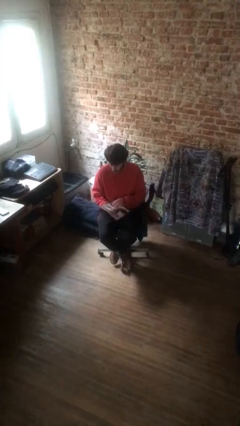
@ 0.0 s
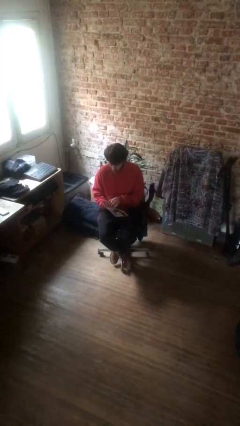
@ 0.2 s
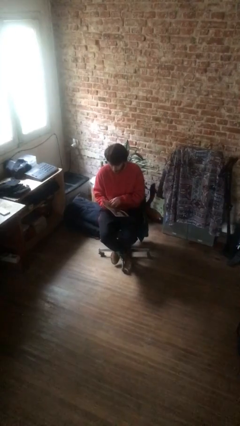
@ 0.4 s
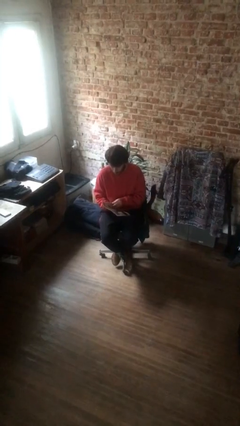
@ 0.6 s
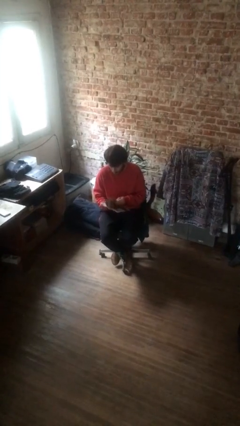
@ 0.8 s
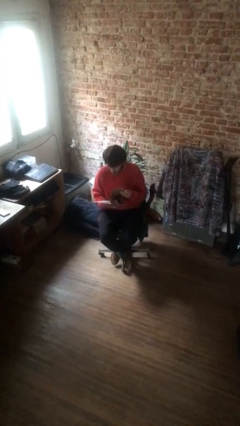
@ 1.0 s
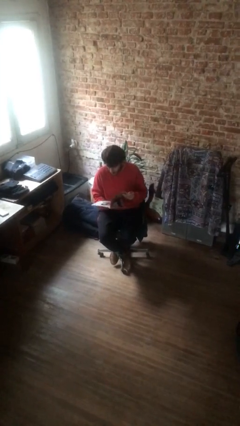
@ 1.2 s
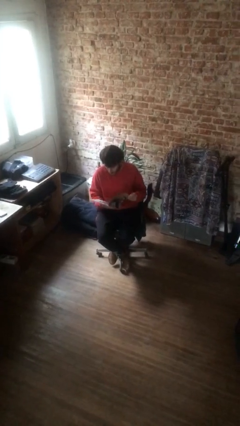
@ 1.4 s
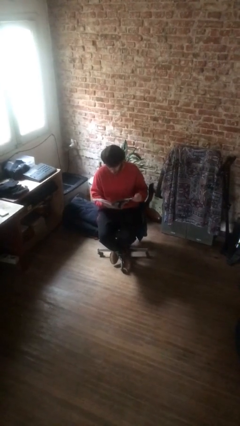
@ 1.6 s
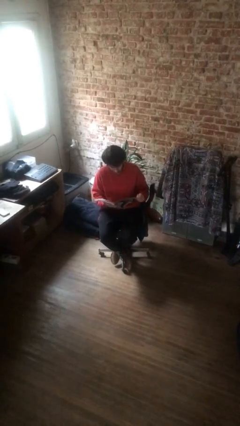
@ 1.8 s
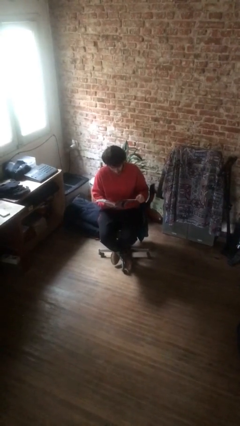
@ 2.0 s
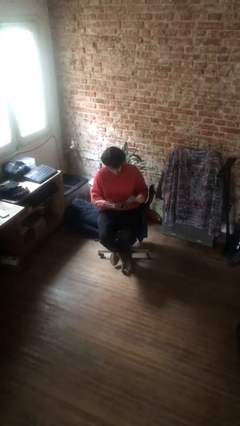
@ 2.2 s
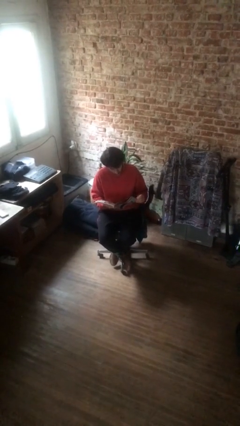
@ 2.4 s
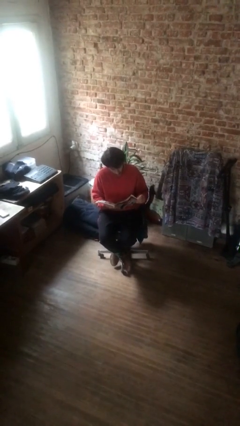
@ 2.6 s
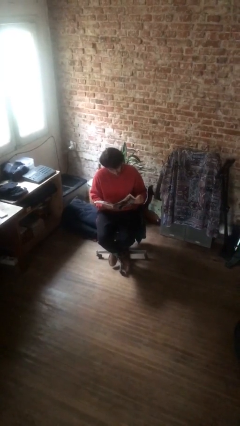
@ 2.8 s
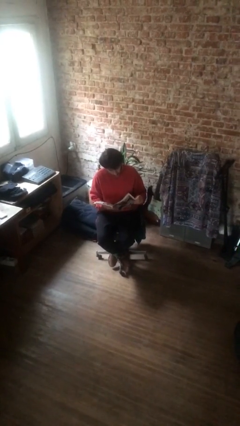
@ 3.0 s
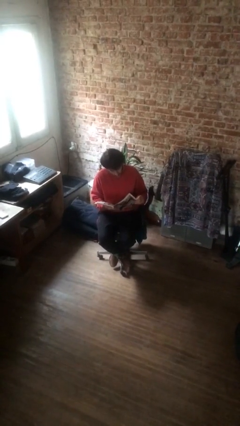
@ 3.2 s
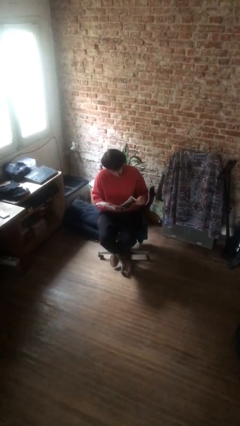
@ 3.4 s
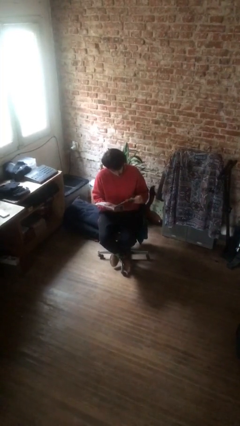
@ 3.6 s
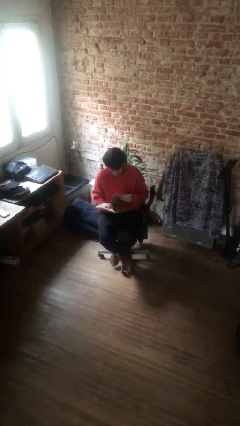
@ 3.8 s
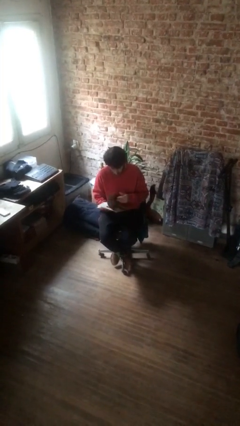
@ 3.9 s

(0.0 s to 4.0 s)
person reads magazine

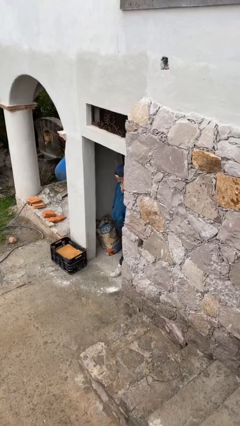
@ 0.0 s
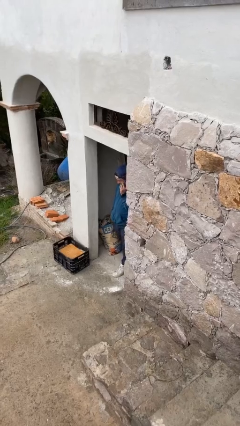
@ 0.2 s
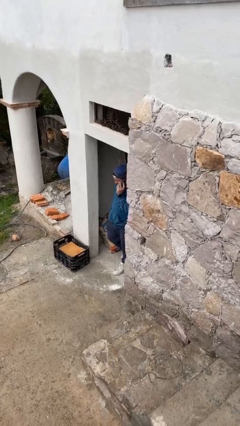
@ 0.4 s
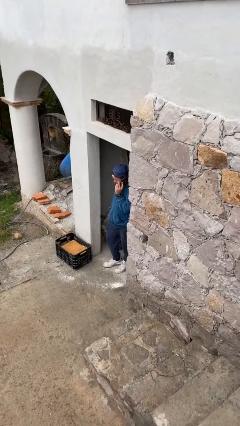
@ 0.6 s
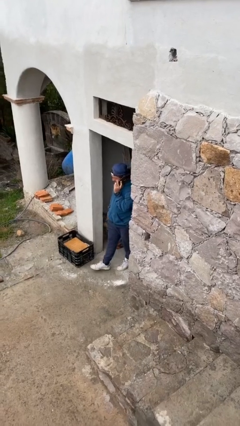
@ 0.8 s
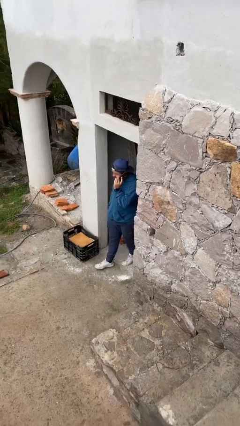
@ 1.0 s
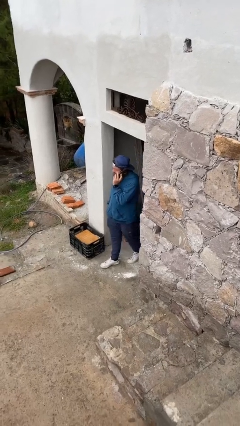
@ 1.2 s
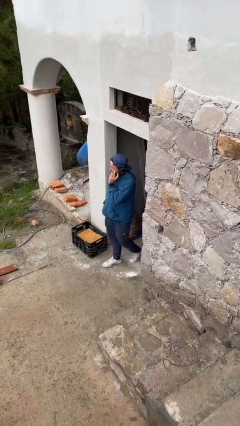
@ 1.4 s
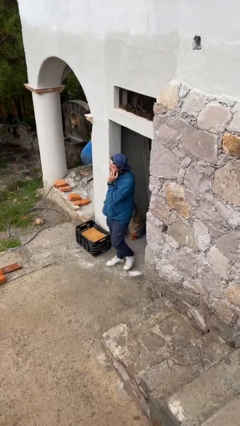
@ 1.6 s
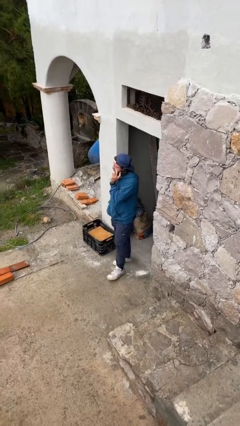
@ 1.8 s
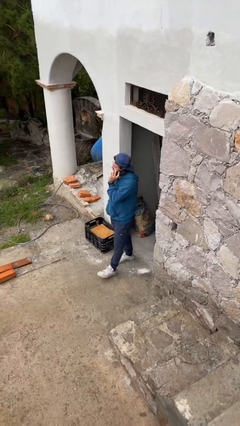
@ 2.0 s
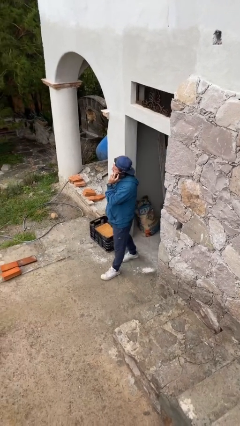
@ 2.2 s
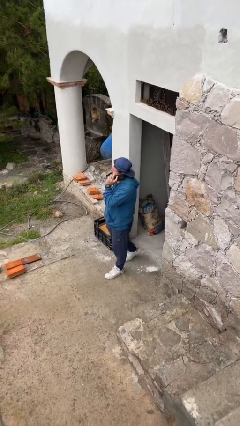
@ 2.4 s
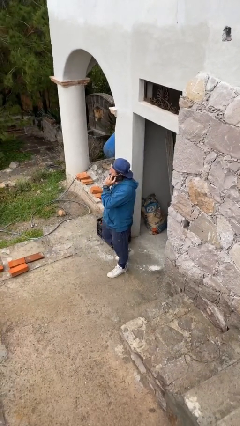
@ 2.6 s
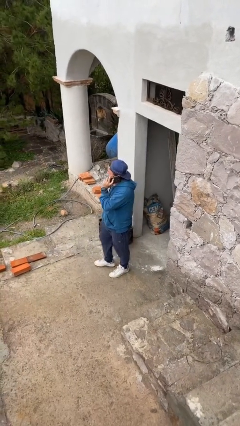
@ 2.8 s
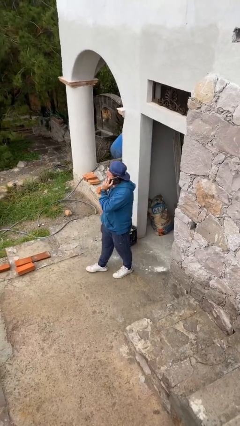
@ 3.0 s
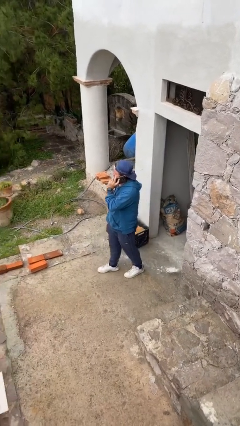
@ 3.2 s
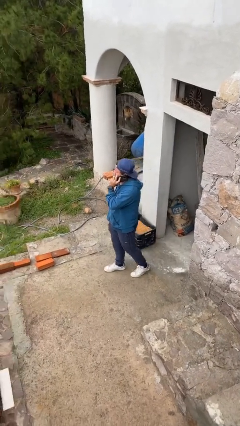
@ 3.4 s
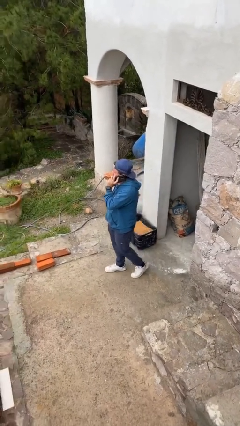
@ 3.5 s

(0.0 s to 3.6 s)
person enters scene through structure

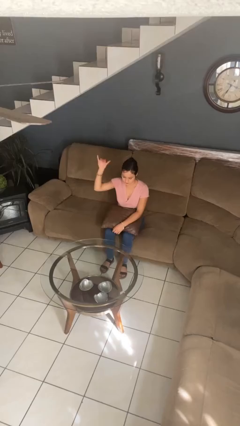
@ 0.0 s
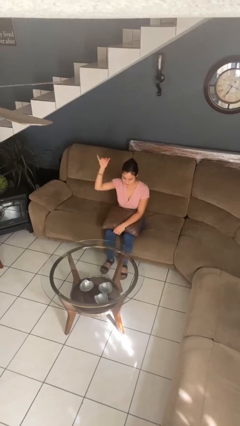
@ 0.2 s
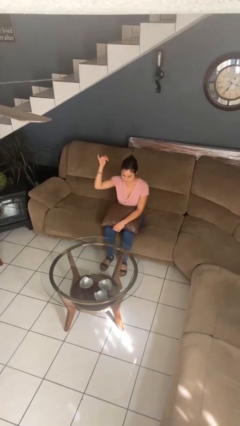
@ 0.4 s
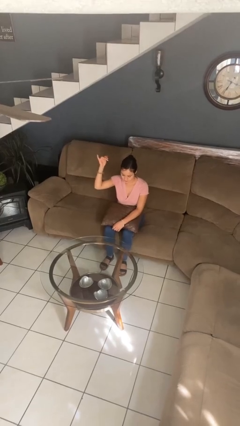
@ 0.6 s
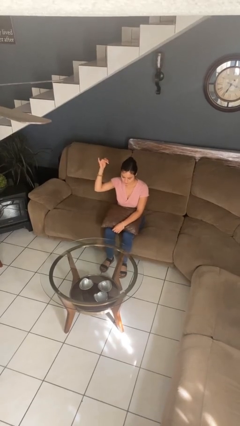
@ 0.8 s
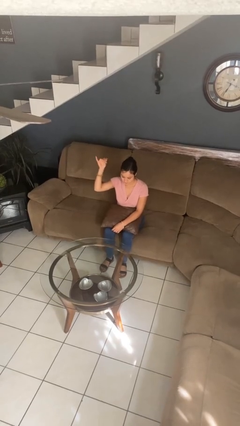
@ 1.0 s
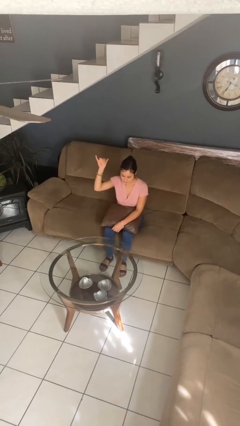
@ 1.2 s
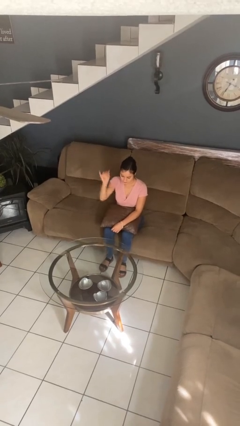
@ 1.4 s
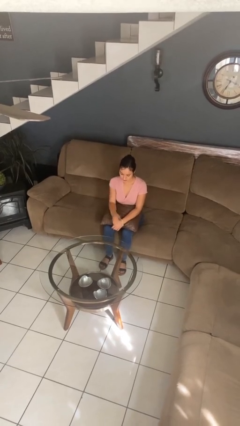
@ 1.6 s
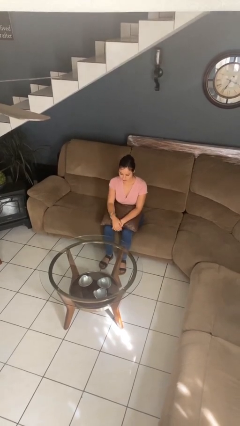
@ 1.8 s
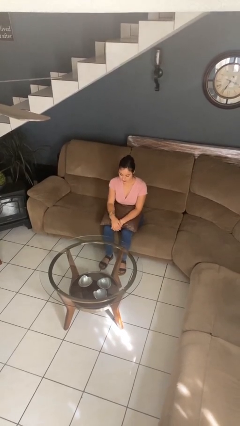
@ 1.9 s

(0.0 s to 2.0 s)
person gestures hang loose

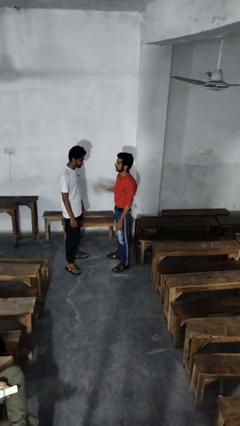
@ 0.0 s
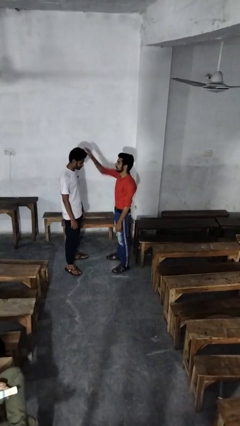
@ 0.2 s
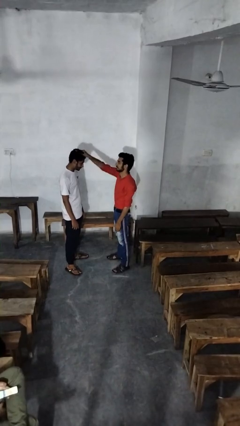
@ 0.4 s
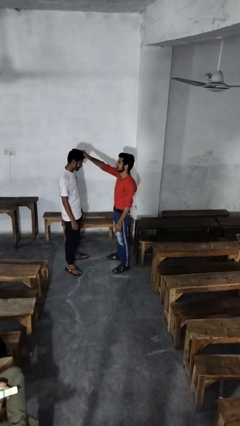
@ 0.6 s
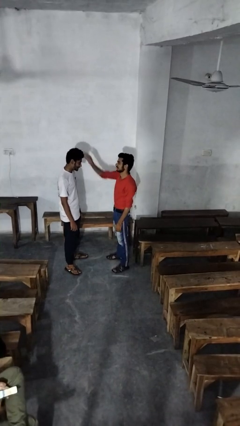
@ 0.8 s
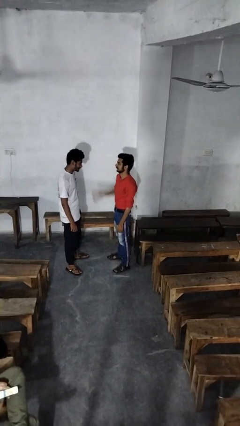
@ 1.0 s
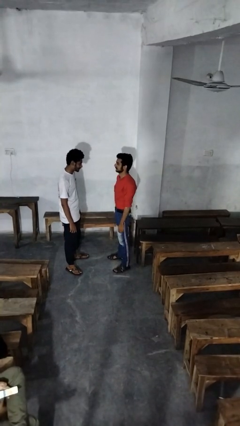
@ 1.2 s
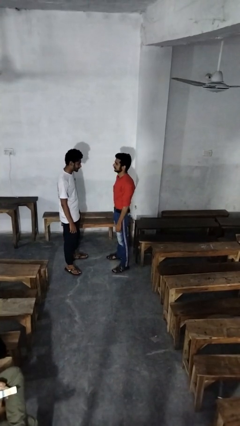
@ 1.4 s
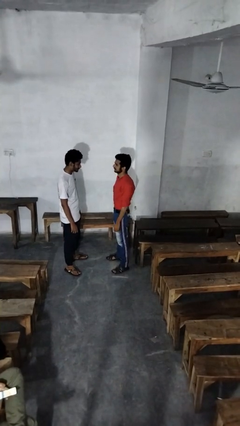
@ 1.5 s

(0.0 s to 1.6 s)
person grabs person by hair

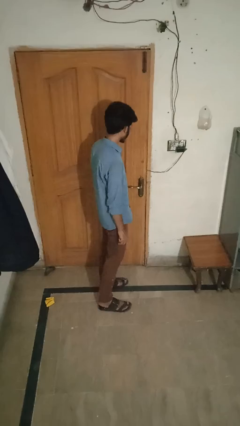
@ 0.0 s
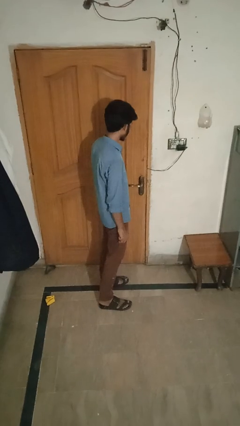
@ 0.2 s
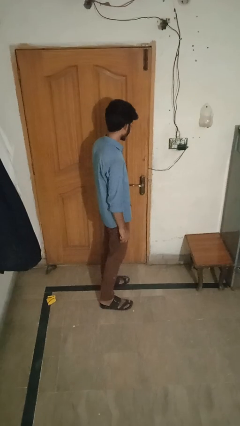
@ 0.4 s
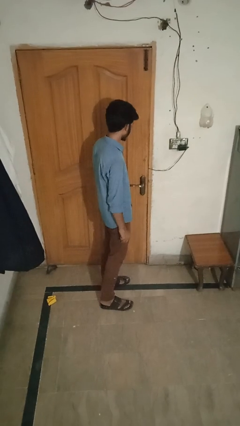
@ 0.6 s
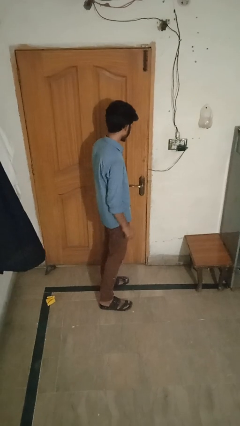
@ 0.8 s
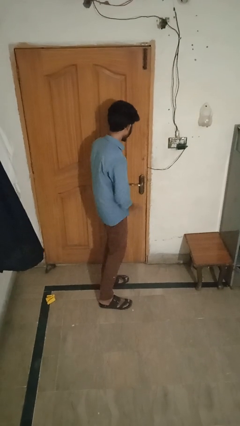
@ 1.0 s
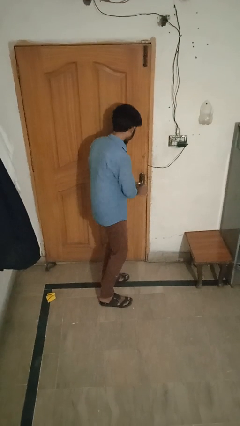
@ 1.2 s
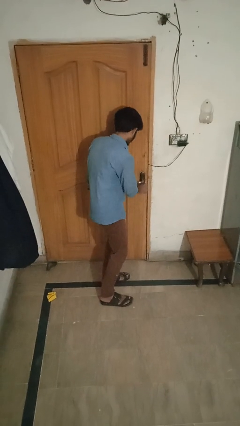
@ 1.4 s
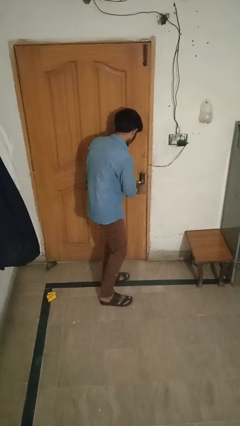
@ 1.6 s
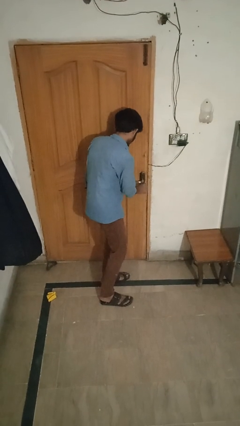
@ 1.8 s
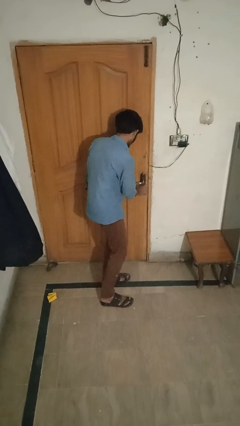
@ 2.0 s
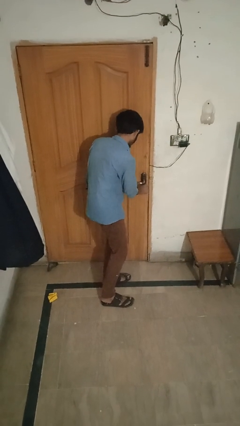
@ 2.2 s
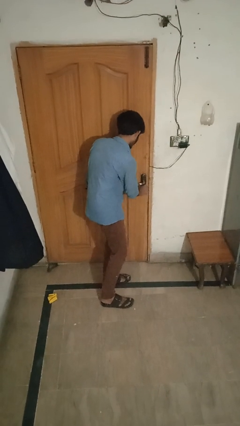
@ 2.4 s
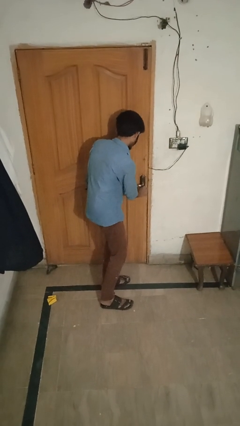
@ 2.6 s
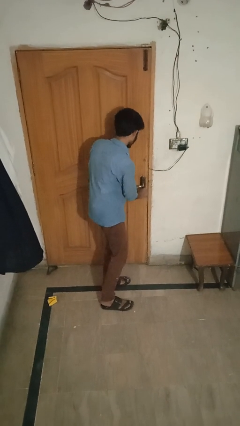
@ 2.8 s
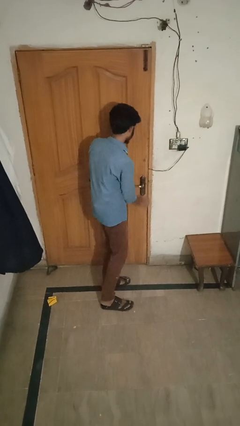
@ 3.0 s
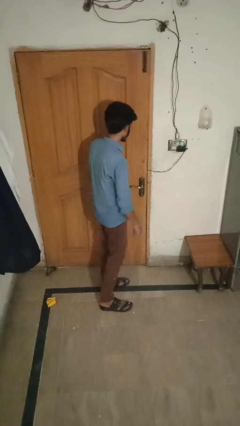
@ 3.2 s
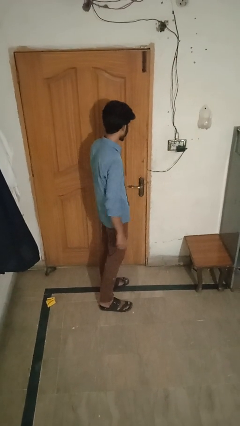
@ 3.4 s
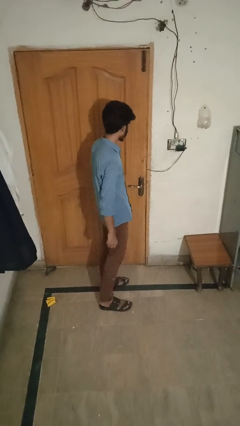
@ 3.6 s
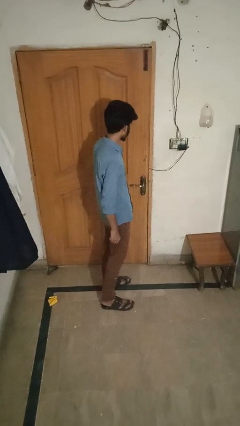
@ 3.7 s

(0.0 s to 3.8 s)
person unlocks door with keys

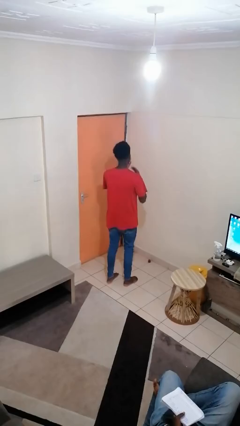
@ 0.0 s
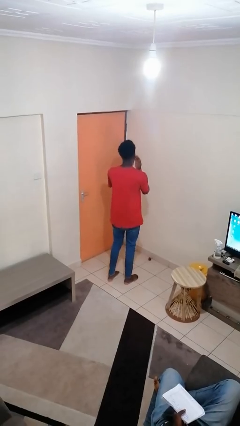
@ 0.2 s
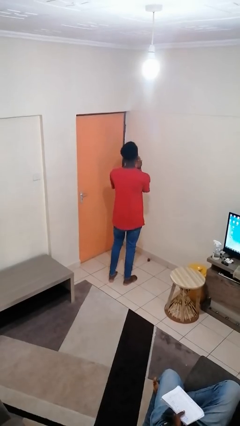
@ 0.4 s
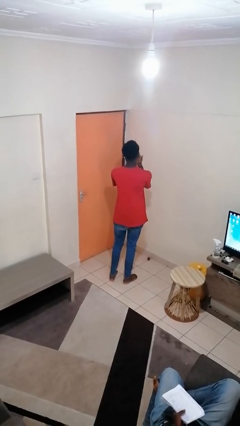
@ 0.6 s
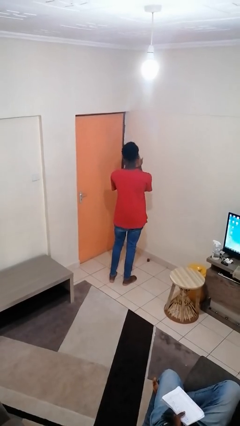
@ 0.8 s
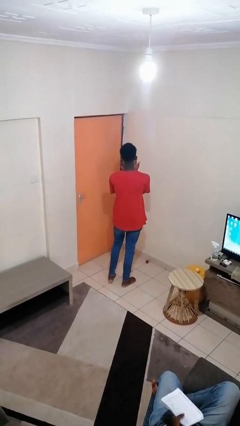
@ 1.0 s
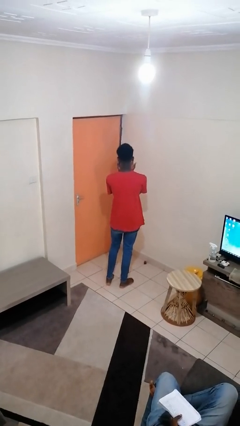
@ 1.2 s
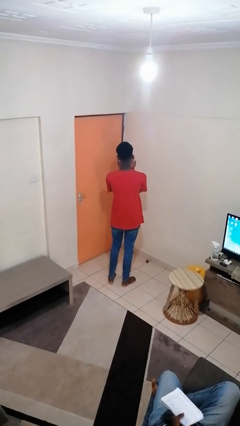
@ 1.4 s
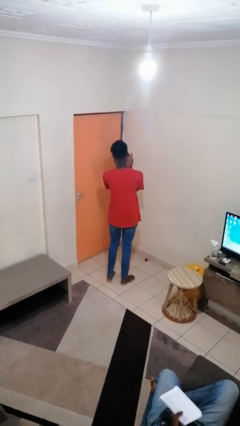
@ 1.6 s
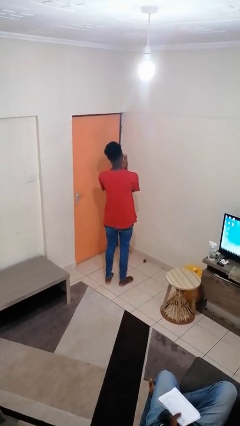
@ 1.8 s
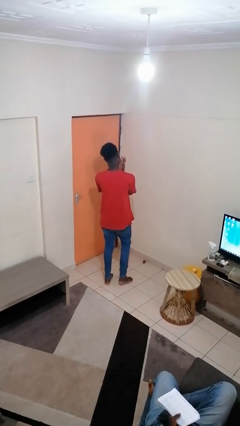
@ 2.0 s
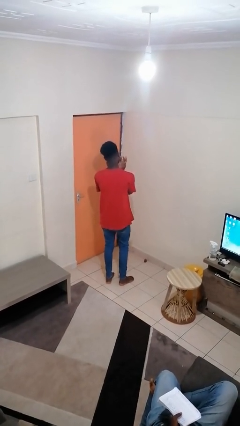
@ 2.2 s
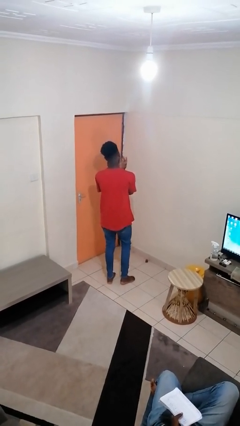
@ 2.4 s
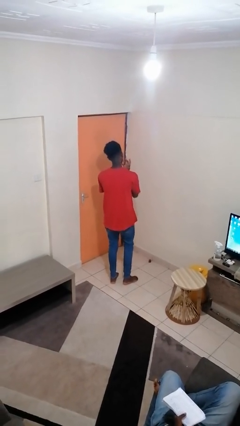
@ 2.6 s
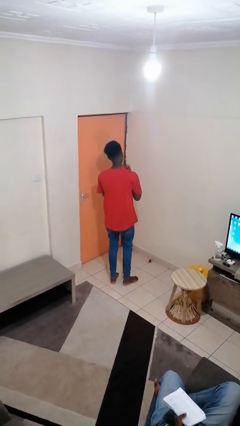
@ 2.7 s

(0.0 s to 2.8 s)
person licks fingers
